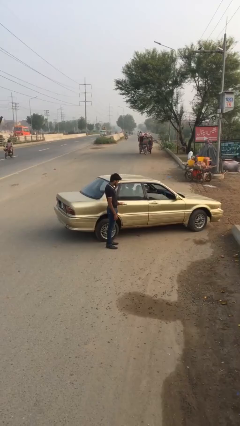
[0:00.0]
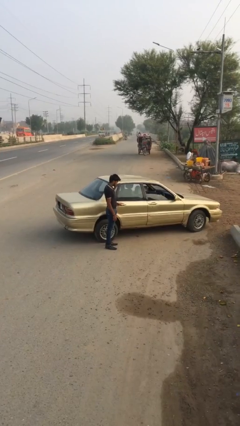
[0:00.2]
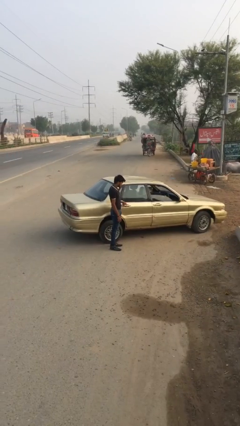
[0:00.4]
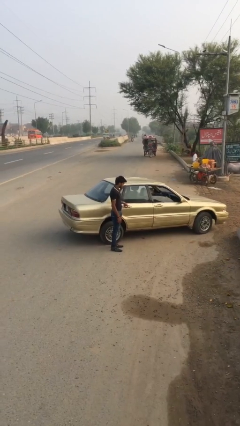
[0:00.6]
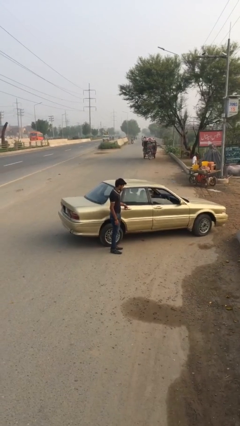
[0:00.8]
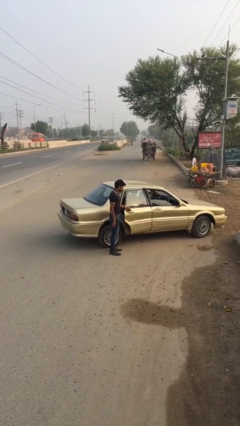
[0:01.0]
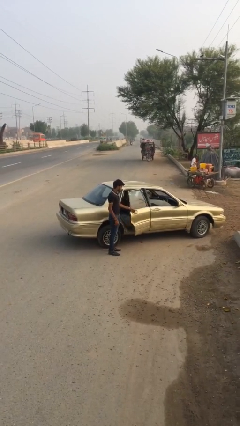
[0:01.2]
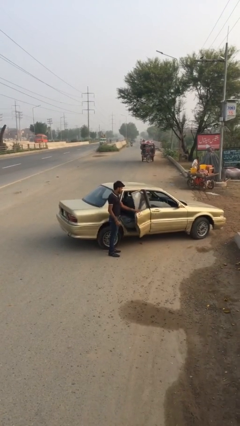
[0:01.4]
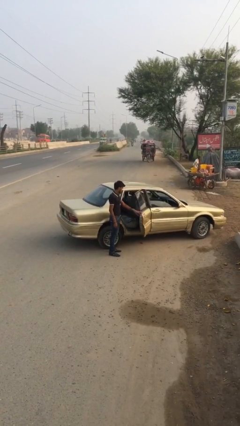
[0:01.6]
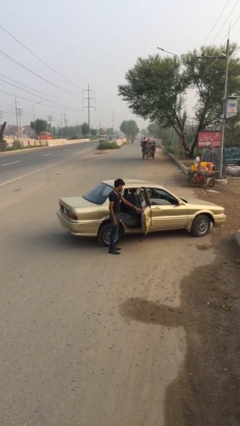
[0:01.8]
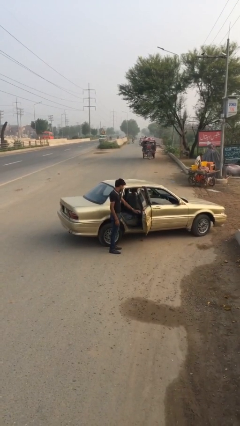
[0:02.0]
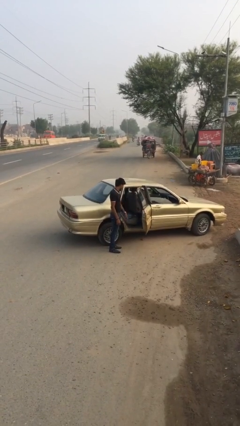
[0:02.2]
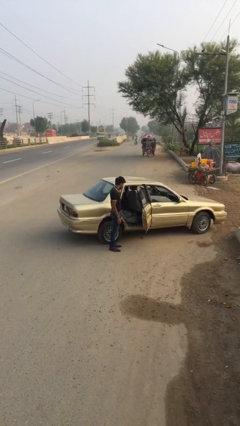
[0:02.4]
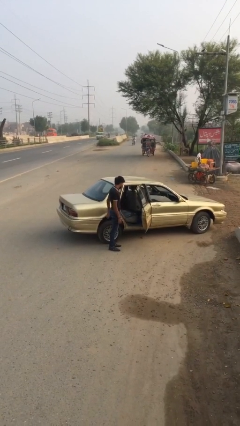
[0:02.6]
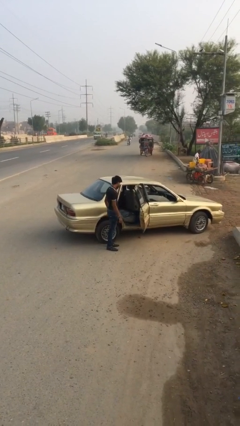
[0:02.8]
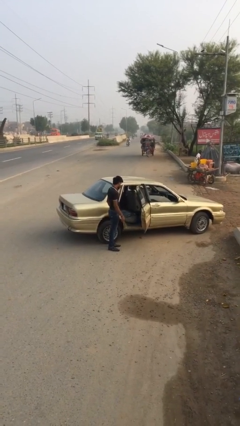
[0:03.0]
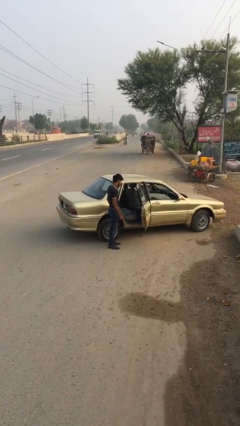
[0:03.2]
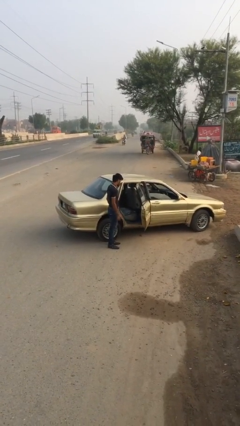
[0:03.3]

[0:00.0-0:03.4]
person opens car door

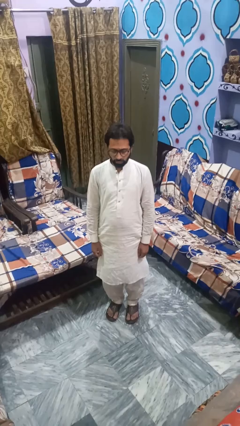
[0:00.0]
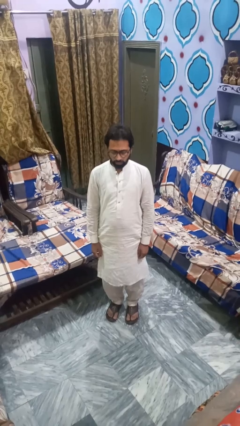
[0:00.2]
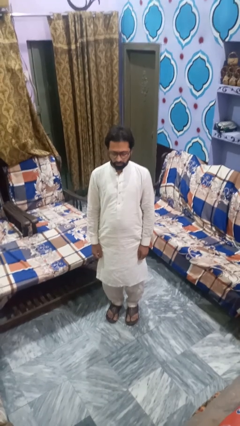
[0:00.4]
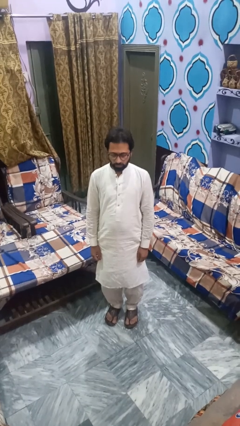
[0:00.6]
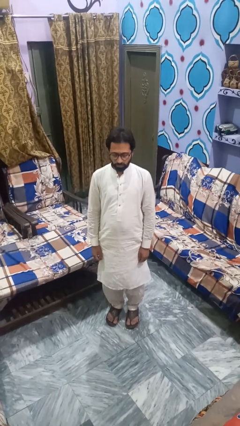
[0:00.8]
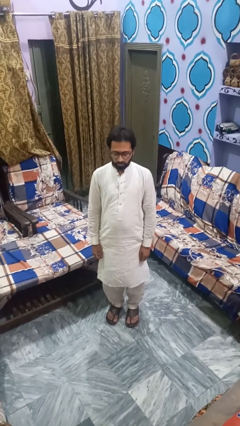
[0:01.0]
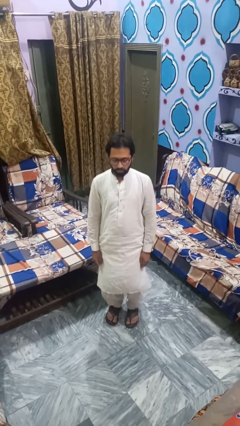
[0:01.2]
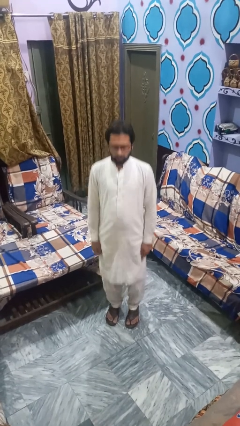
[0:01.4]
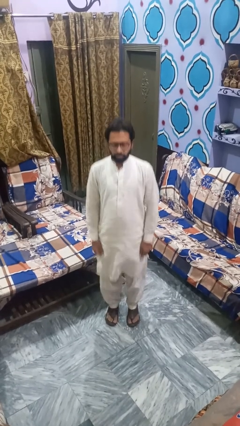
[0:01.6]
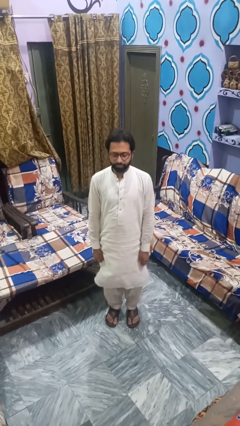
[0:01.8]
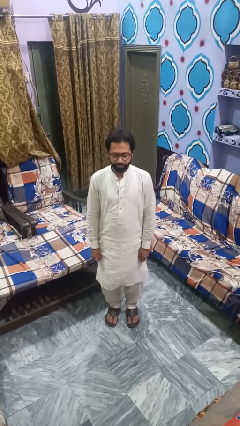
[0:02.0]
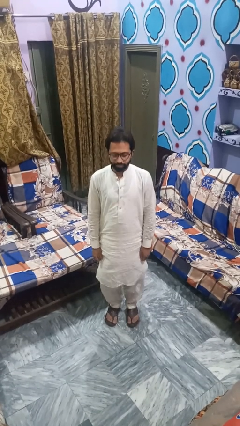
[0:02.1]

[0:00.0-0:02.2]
person jumps

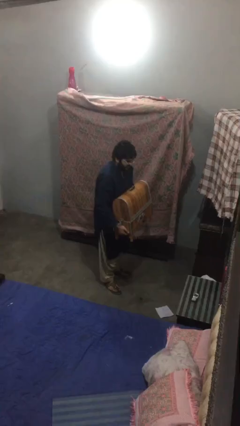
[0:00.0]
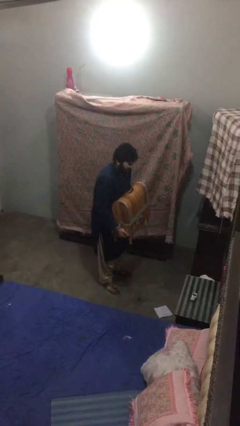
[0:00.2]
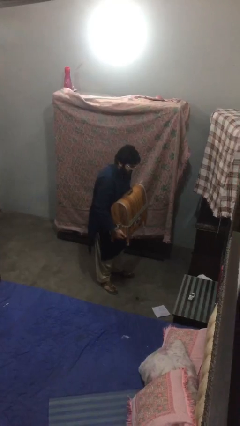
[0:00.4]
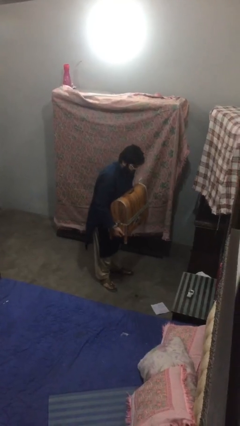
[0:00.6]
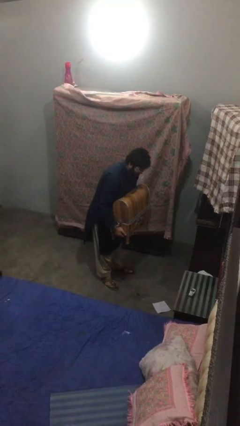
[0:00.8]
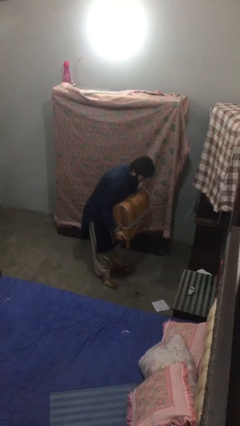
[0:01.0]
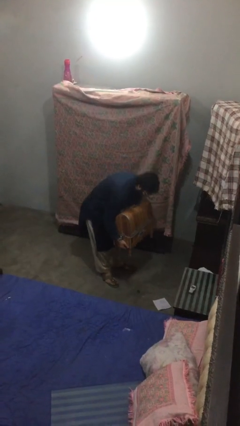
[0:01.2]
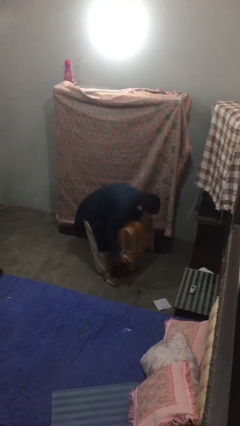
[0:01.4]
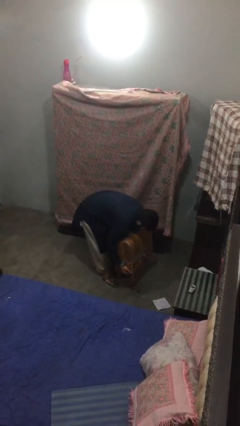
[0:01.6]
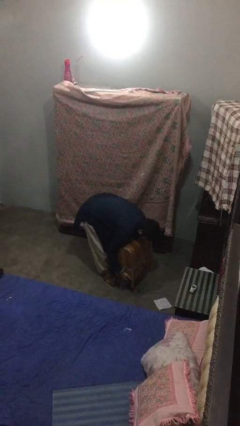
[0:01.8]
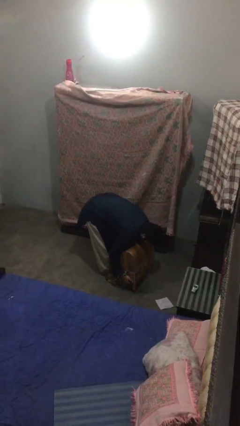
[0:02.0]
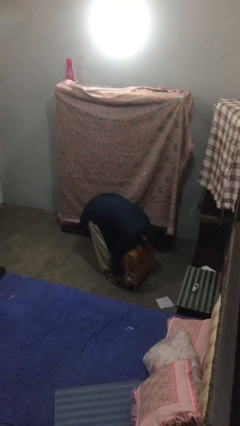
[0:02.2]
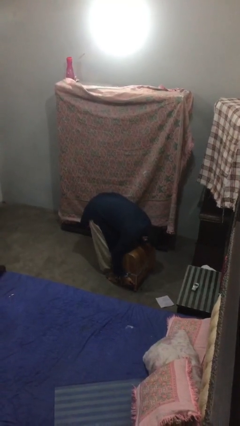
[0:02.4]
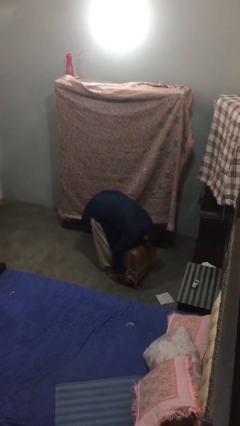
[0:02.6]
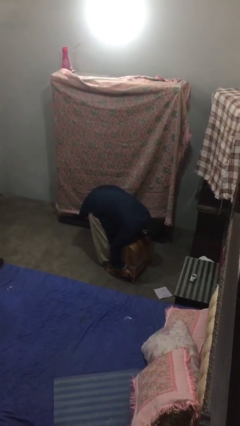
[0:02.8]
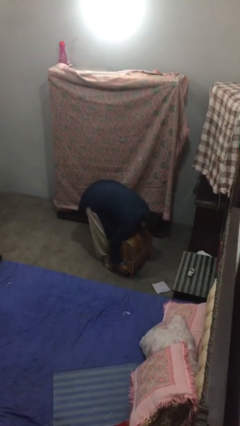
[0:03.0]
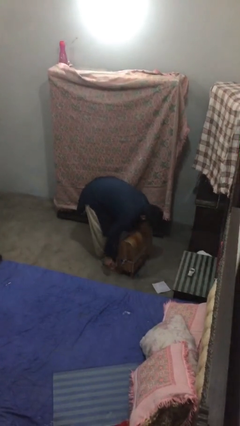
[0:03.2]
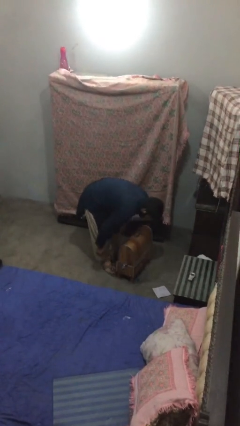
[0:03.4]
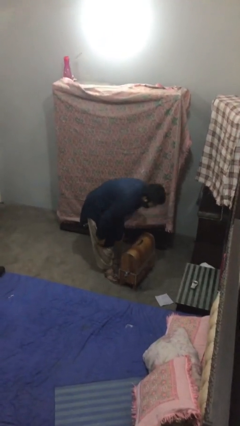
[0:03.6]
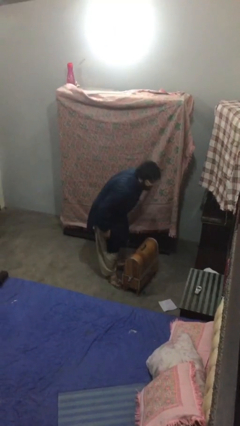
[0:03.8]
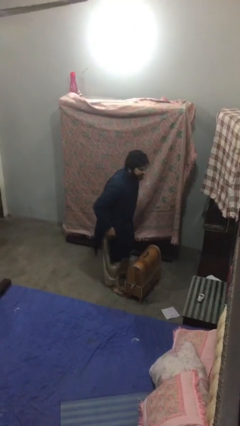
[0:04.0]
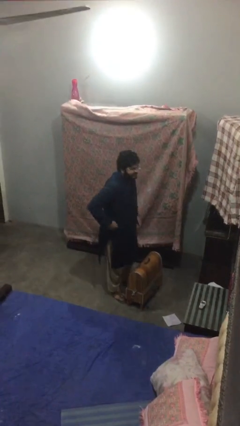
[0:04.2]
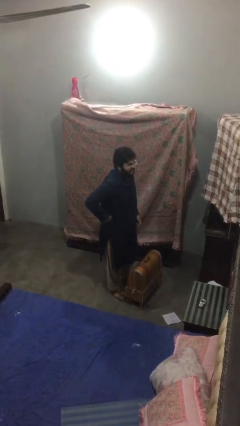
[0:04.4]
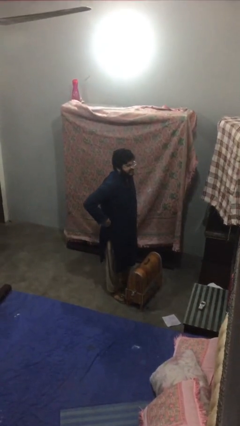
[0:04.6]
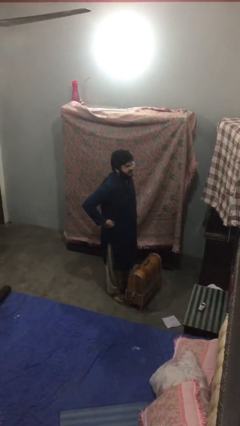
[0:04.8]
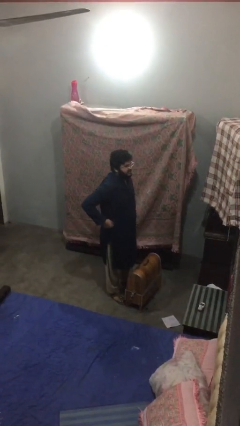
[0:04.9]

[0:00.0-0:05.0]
person puts down object on floor

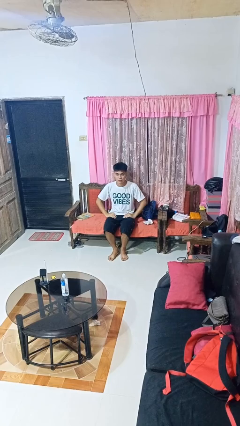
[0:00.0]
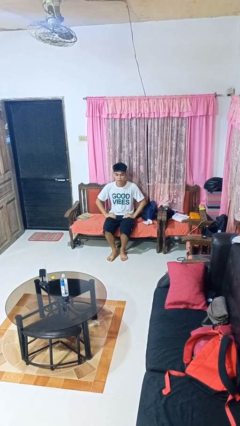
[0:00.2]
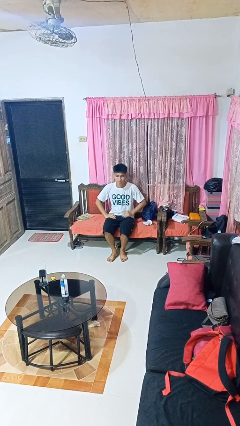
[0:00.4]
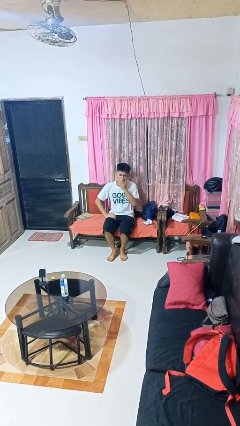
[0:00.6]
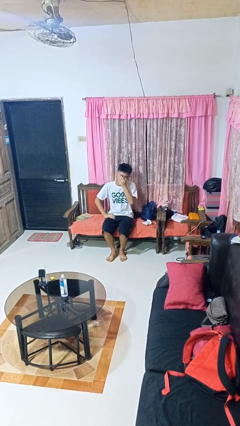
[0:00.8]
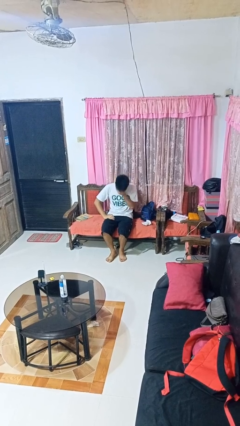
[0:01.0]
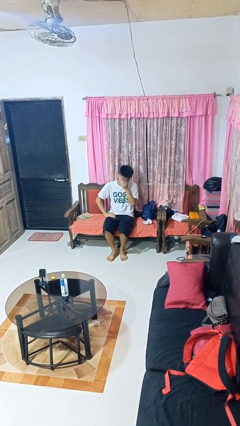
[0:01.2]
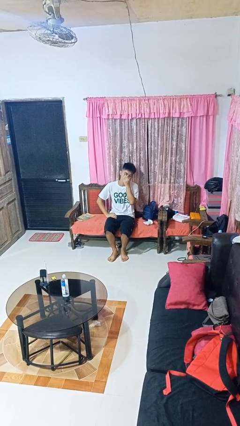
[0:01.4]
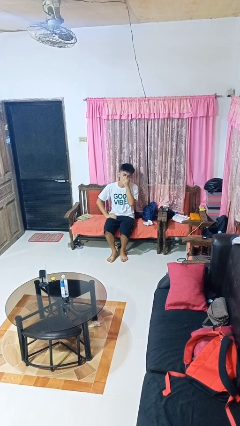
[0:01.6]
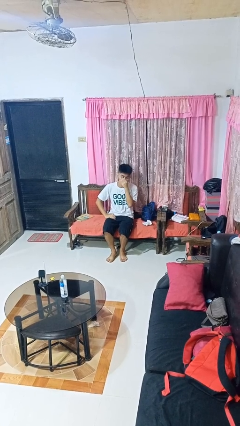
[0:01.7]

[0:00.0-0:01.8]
person sneezes into hand

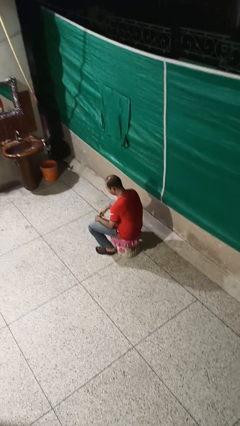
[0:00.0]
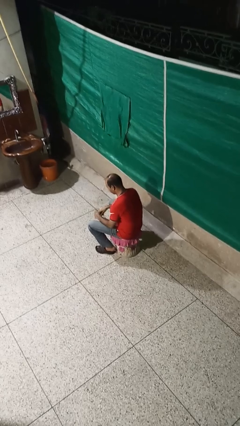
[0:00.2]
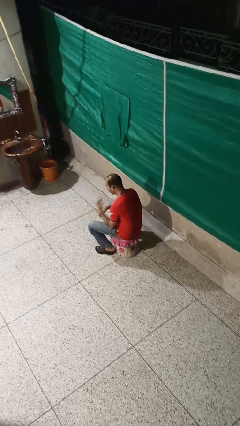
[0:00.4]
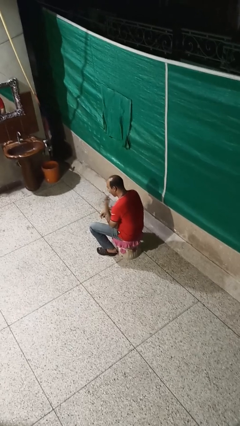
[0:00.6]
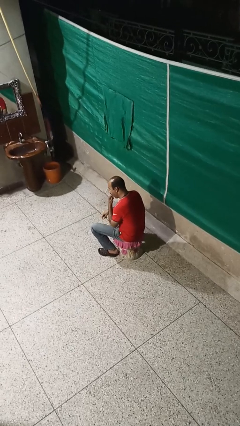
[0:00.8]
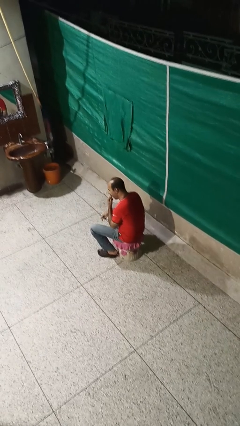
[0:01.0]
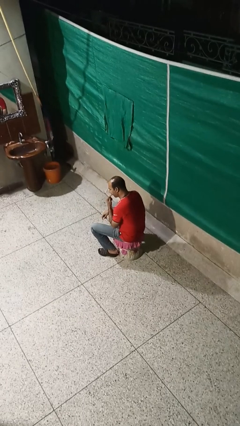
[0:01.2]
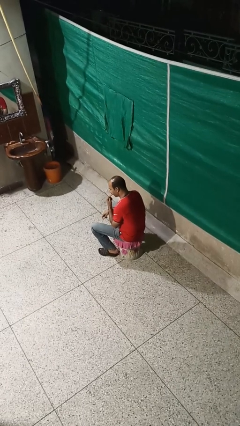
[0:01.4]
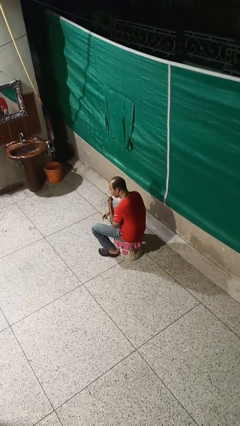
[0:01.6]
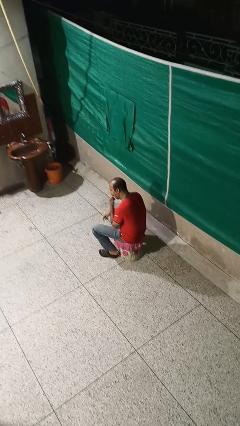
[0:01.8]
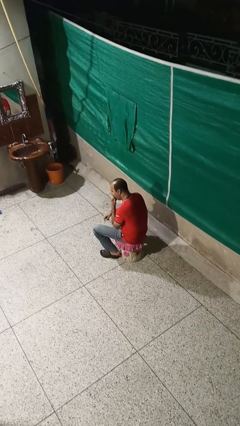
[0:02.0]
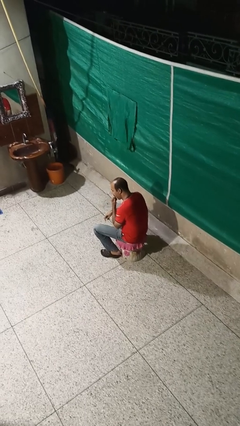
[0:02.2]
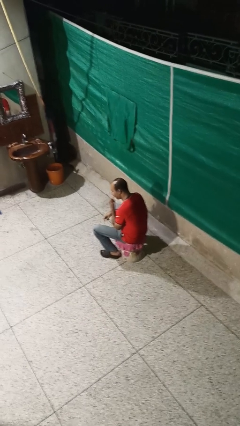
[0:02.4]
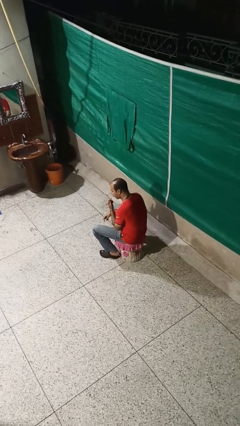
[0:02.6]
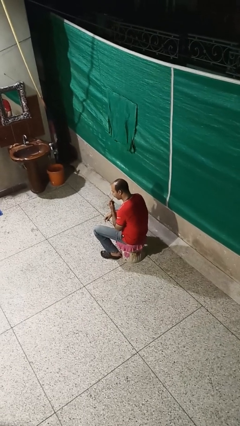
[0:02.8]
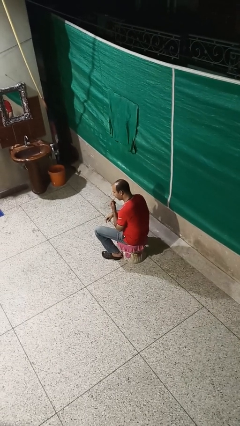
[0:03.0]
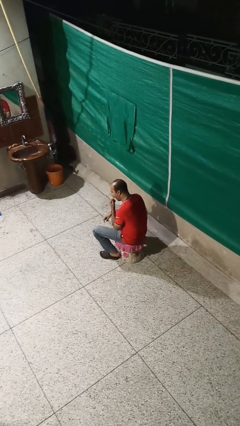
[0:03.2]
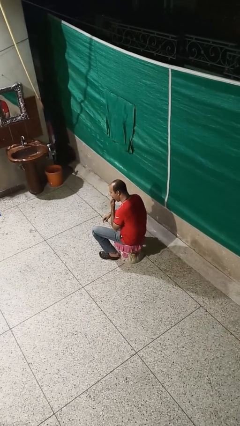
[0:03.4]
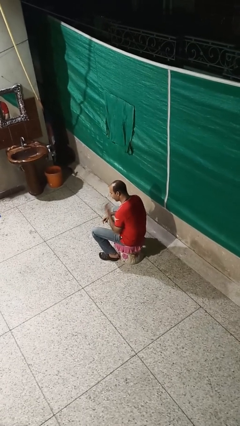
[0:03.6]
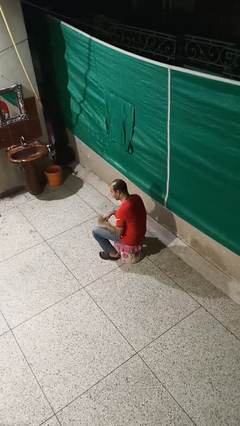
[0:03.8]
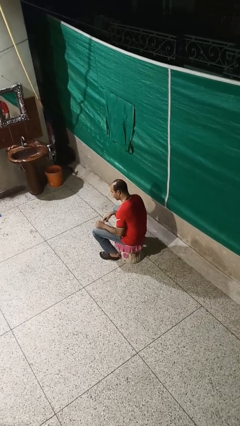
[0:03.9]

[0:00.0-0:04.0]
person licks fingers

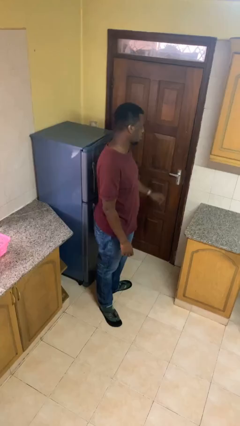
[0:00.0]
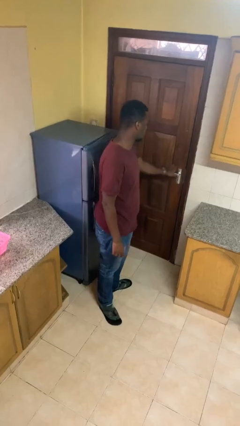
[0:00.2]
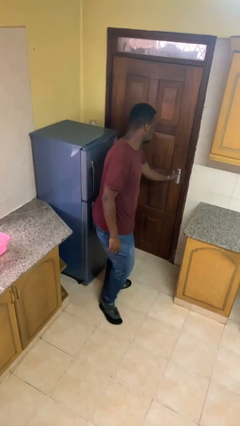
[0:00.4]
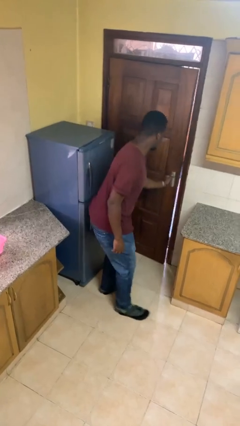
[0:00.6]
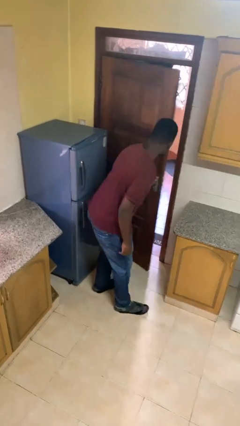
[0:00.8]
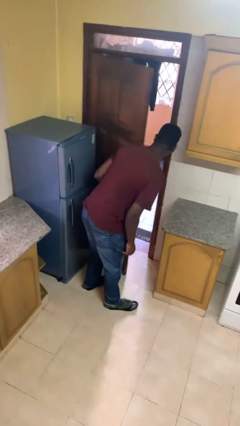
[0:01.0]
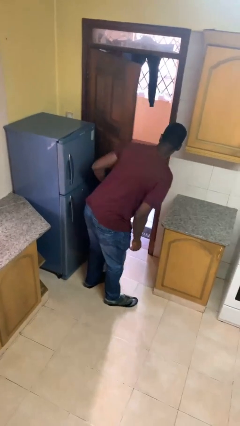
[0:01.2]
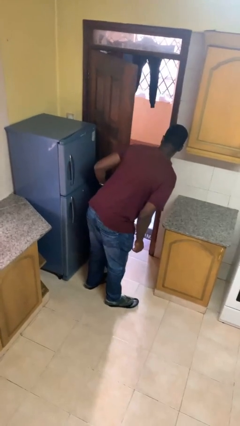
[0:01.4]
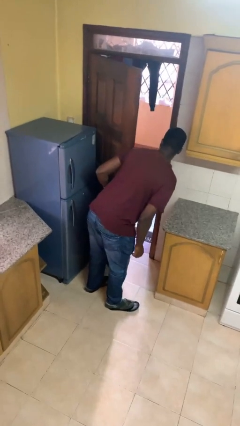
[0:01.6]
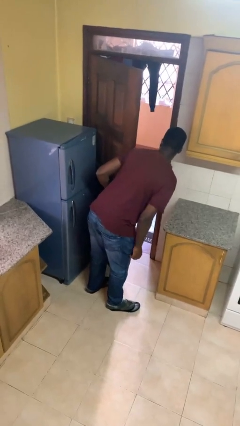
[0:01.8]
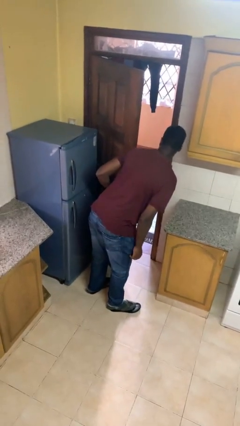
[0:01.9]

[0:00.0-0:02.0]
person opens facility door
